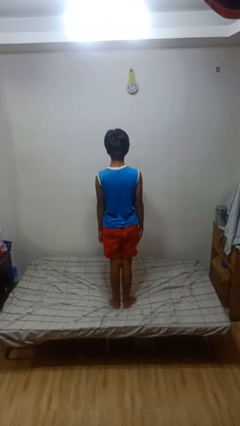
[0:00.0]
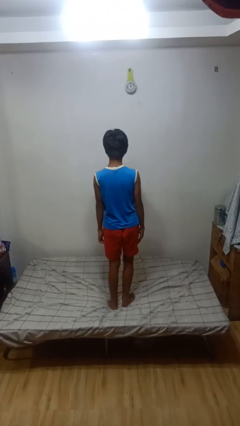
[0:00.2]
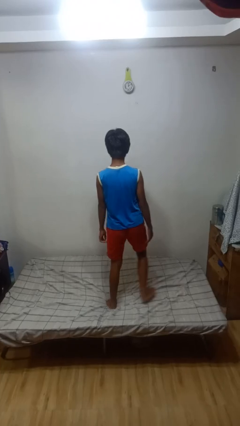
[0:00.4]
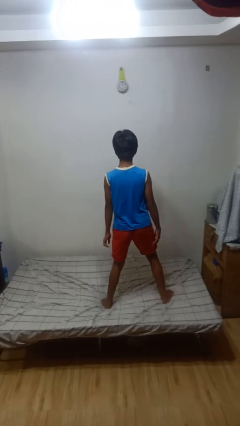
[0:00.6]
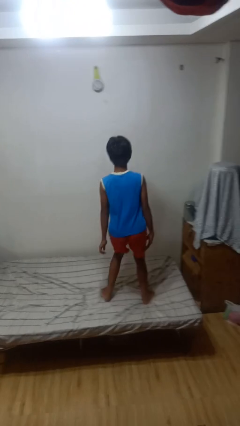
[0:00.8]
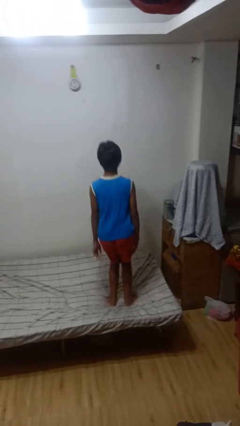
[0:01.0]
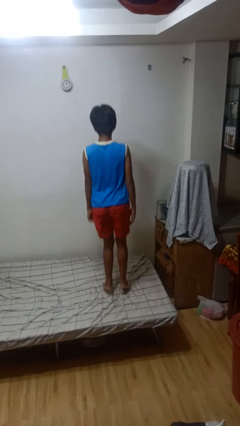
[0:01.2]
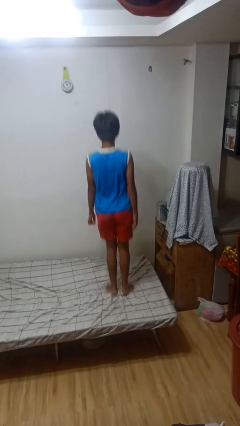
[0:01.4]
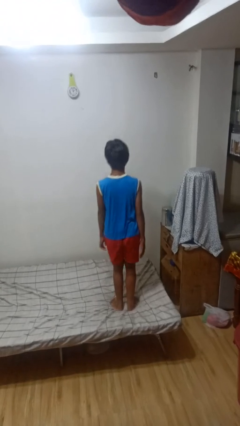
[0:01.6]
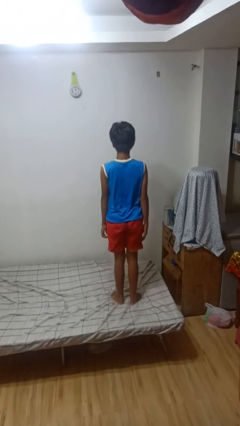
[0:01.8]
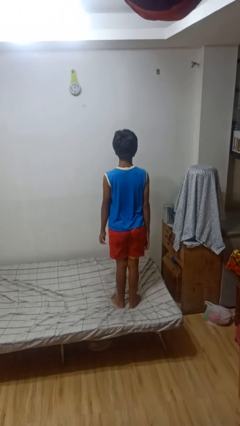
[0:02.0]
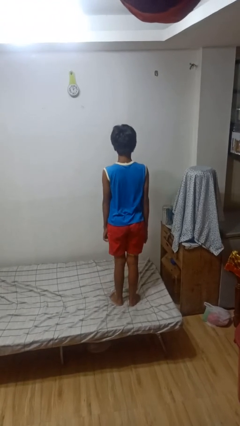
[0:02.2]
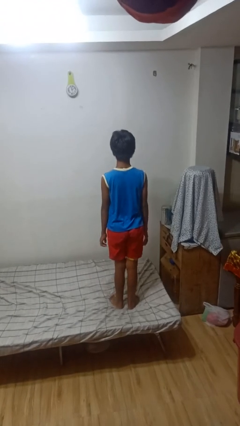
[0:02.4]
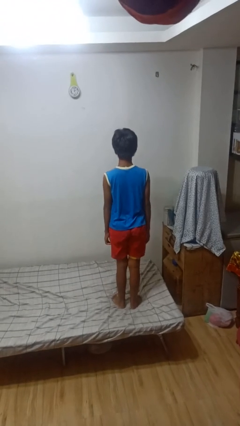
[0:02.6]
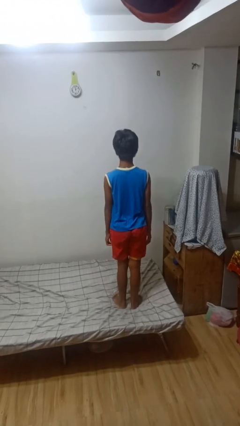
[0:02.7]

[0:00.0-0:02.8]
person jumps on bed

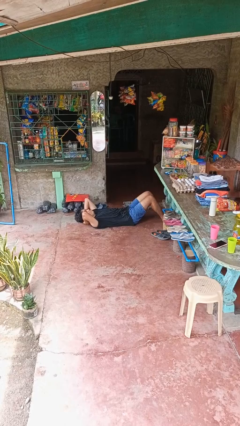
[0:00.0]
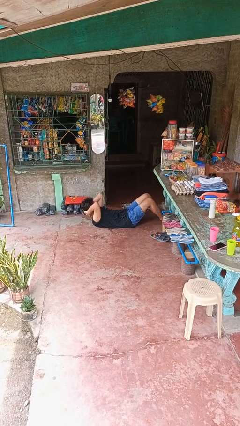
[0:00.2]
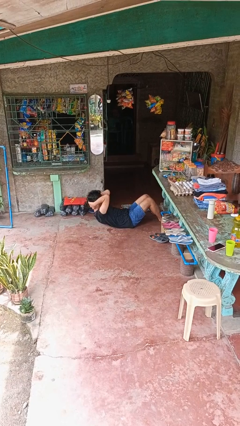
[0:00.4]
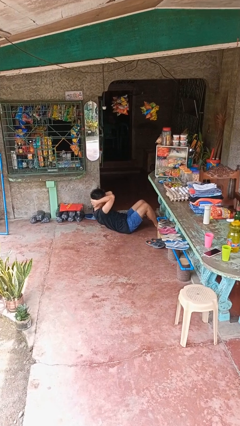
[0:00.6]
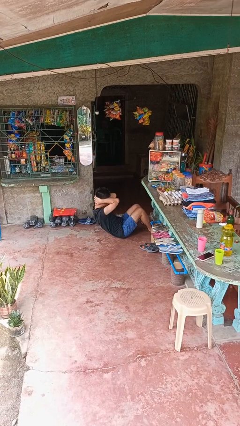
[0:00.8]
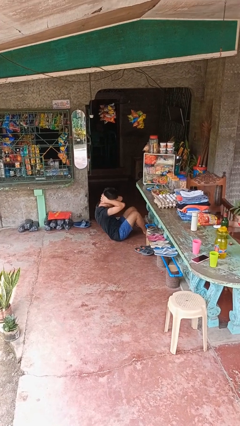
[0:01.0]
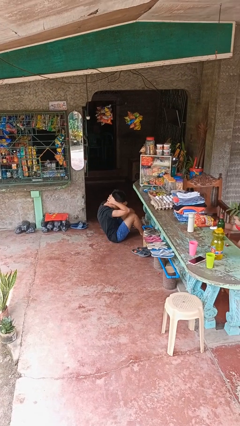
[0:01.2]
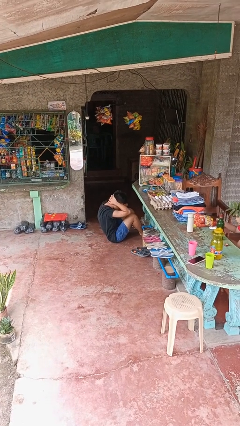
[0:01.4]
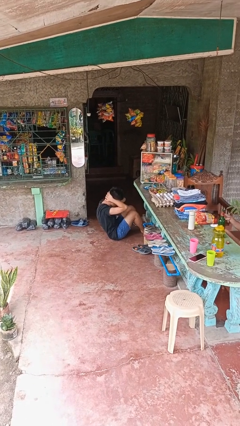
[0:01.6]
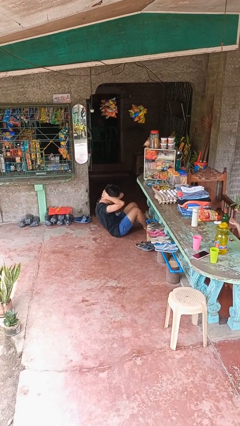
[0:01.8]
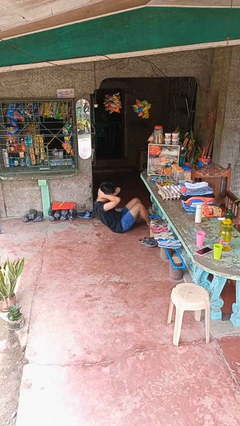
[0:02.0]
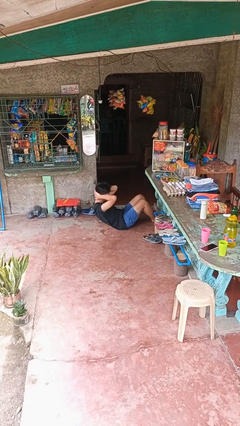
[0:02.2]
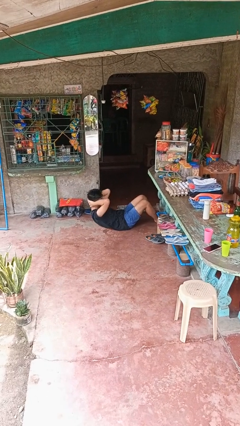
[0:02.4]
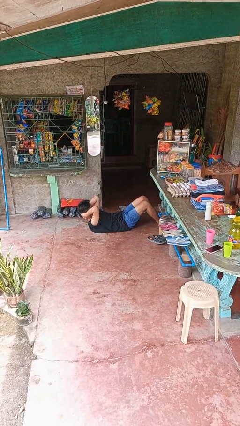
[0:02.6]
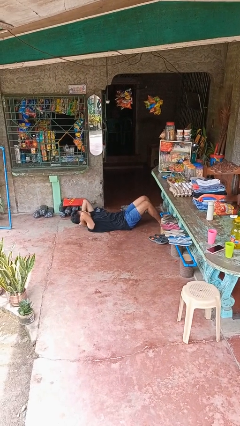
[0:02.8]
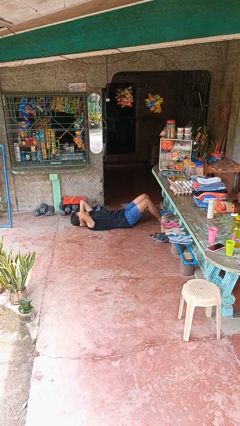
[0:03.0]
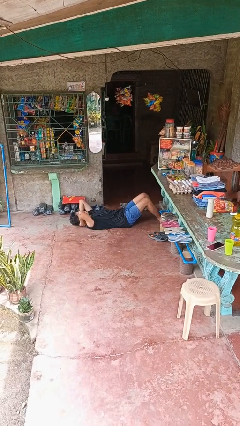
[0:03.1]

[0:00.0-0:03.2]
person exercises with situp

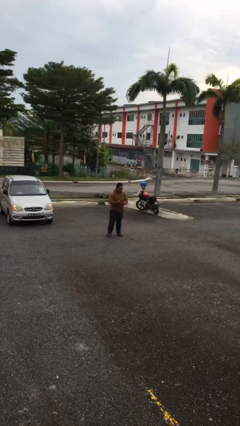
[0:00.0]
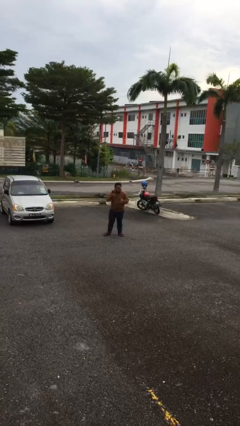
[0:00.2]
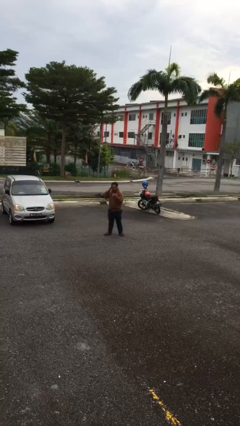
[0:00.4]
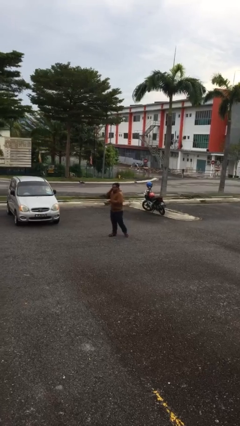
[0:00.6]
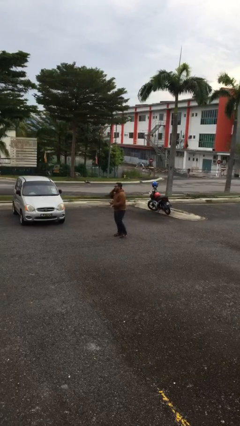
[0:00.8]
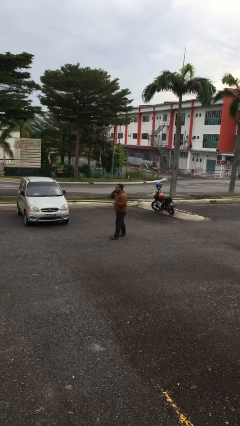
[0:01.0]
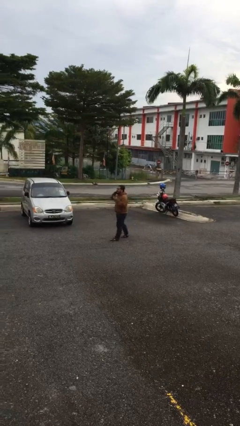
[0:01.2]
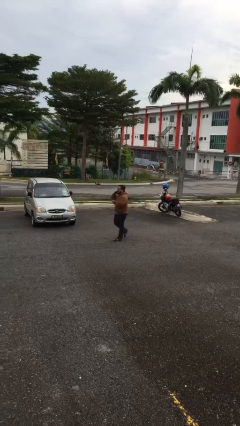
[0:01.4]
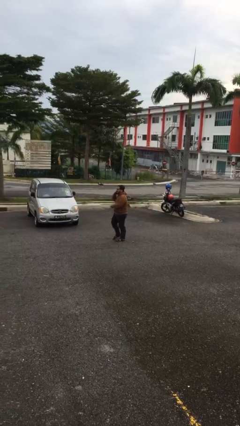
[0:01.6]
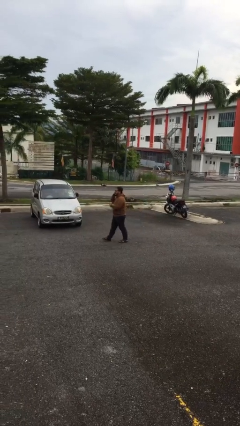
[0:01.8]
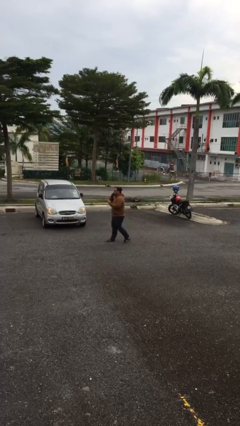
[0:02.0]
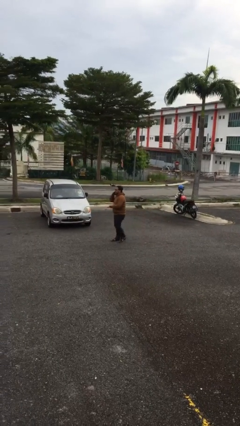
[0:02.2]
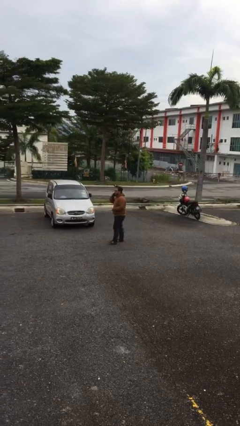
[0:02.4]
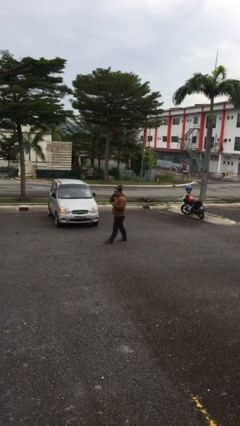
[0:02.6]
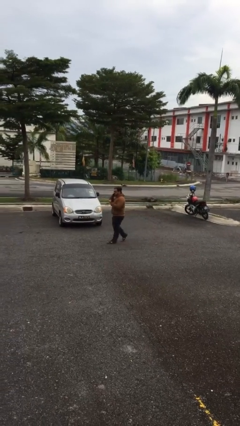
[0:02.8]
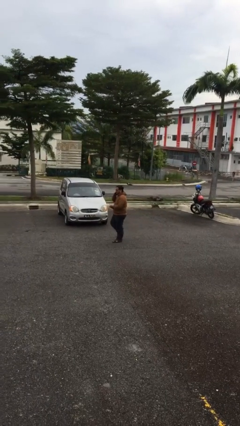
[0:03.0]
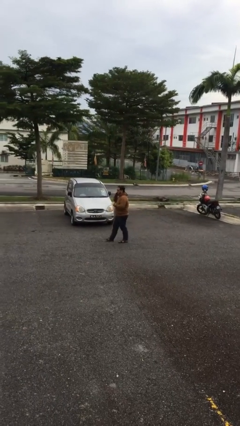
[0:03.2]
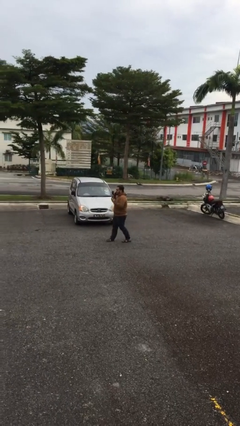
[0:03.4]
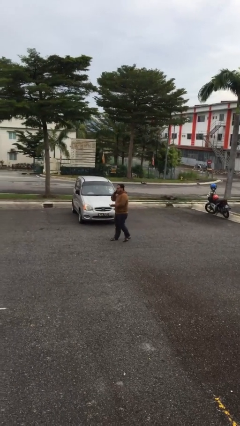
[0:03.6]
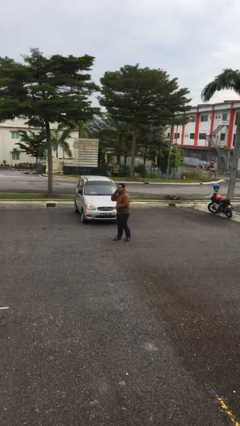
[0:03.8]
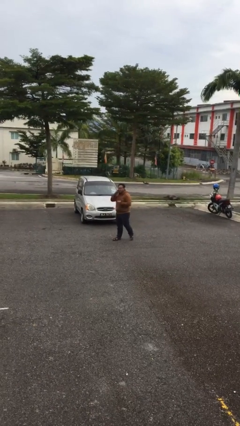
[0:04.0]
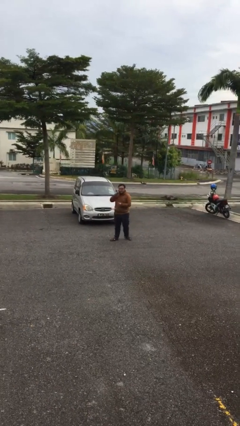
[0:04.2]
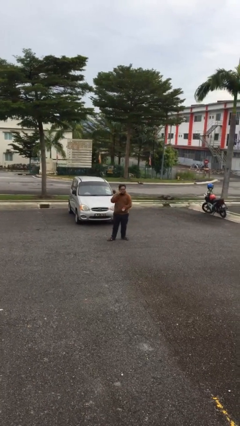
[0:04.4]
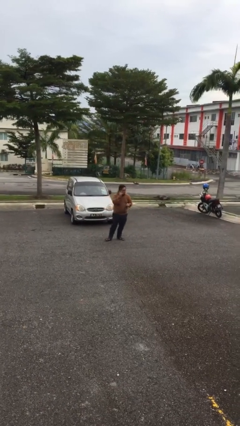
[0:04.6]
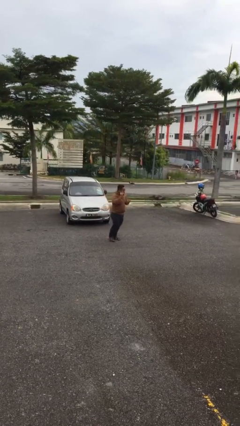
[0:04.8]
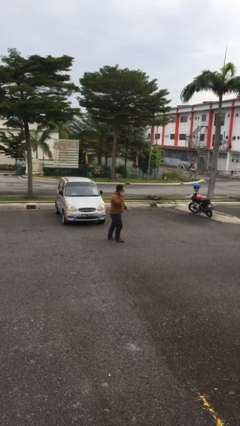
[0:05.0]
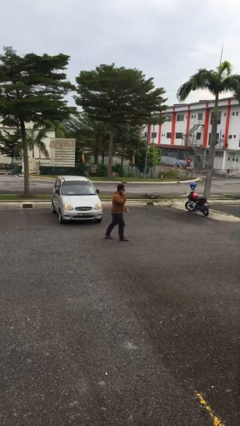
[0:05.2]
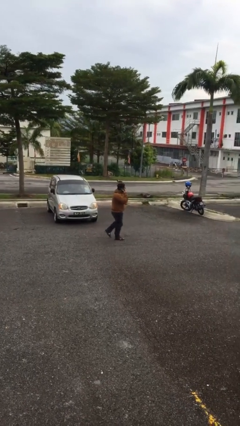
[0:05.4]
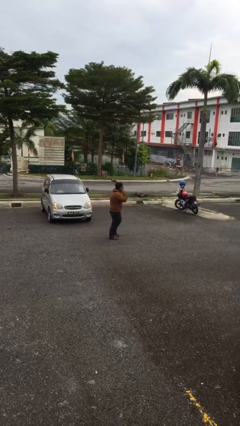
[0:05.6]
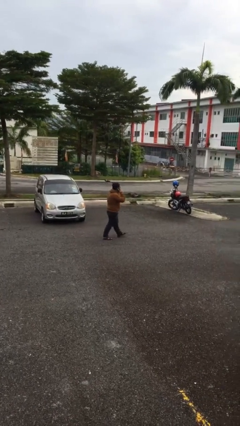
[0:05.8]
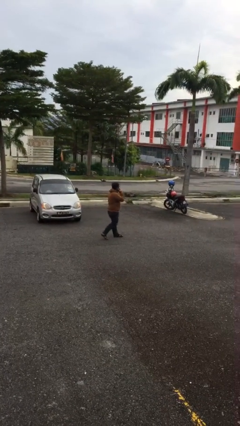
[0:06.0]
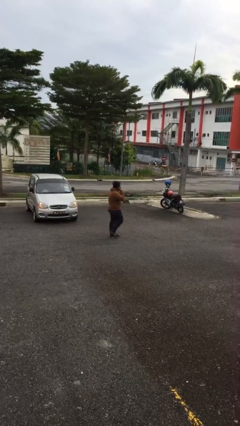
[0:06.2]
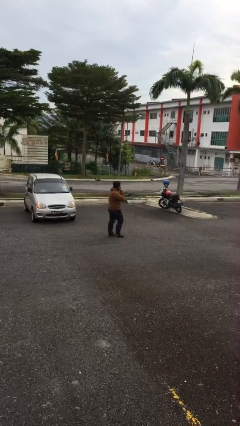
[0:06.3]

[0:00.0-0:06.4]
person talks on phone

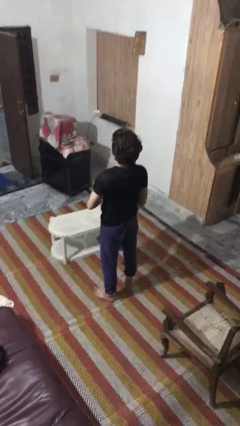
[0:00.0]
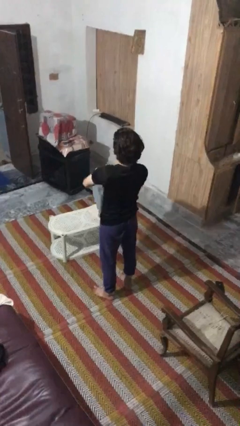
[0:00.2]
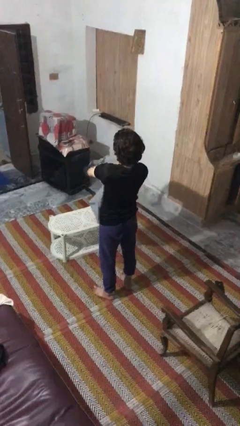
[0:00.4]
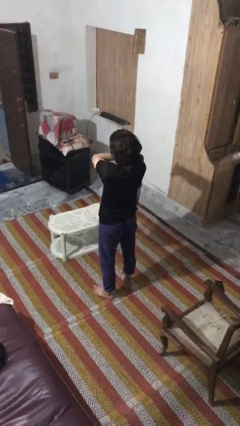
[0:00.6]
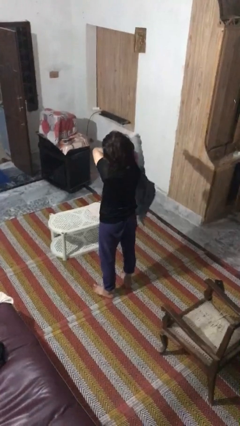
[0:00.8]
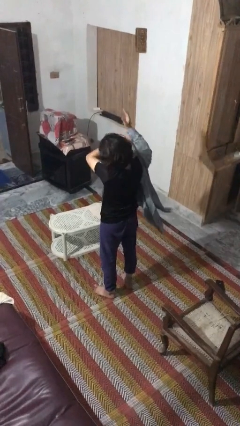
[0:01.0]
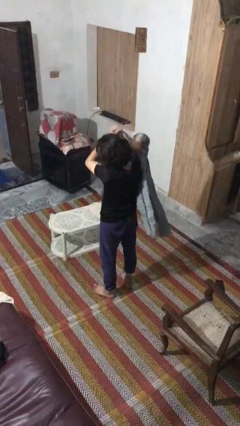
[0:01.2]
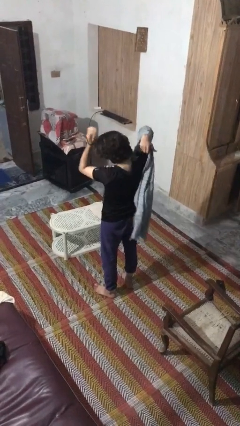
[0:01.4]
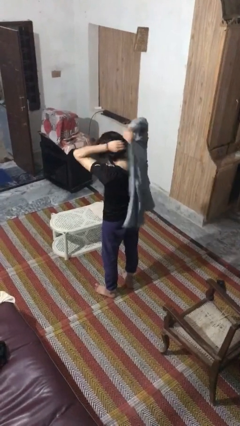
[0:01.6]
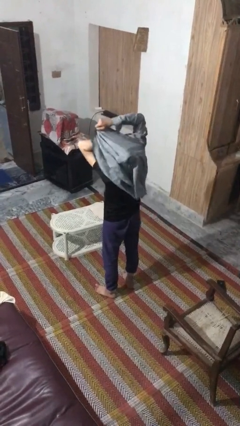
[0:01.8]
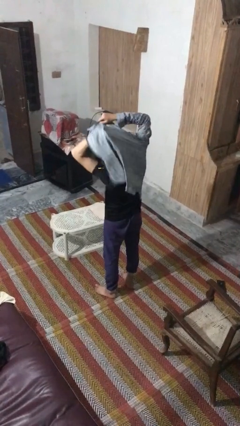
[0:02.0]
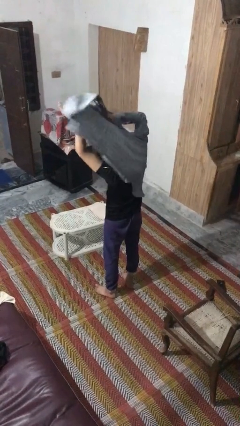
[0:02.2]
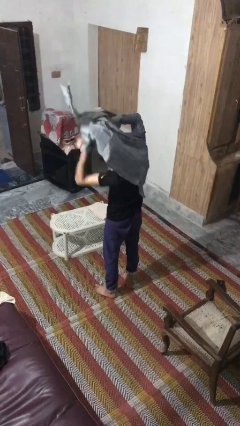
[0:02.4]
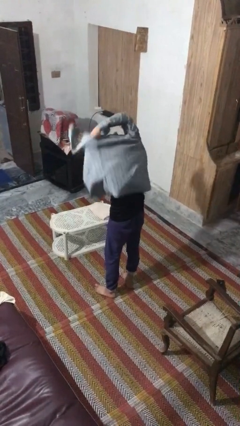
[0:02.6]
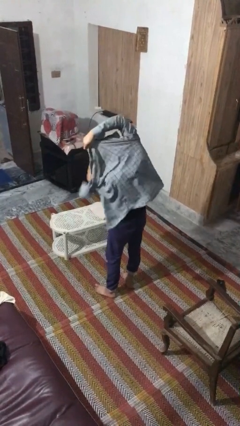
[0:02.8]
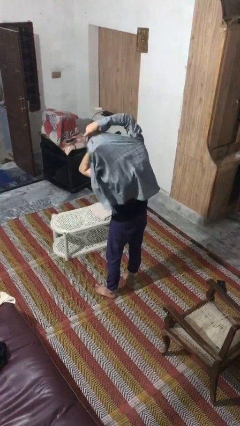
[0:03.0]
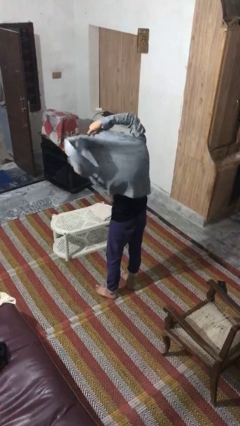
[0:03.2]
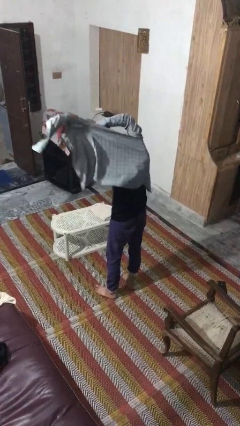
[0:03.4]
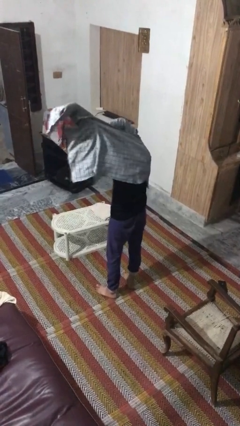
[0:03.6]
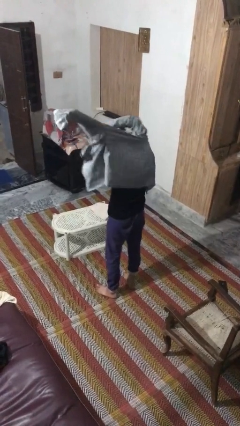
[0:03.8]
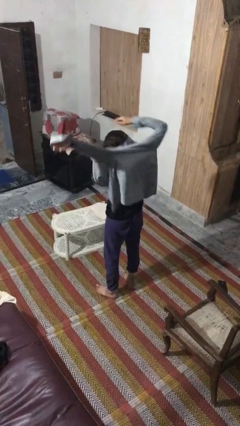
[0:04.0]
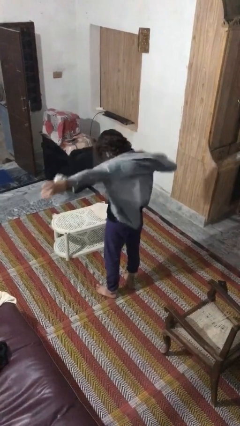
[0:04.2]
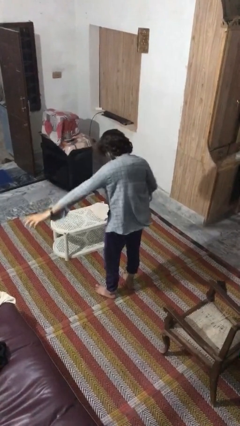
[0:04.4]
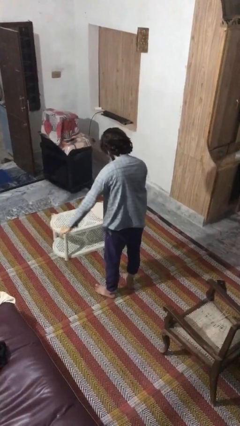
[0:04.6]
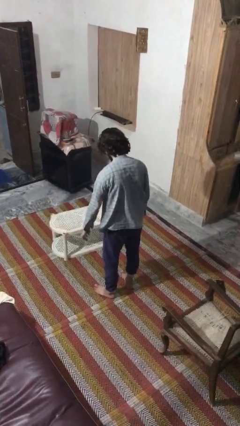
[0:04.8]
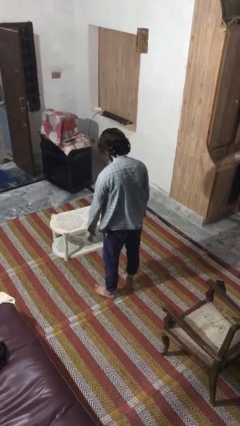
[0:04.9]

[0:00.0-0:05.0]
person puts on shirt
